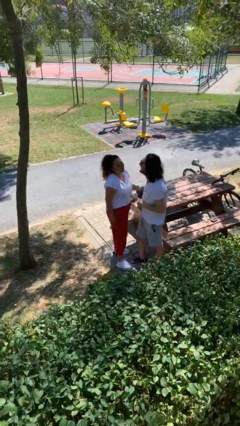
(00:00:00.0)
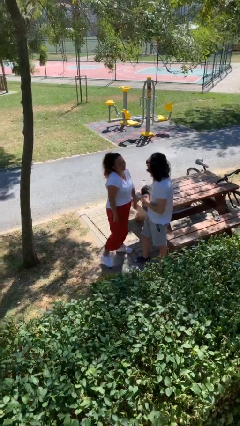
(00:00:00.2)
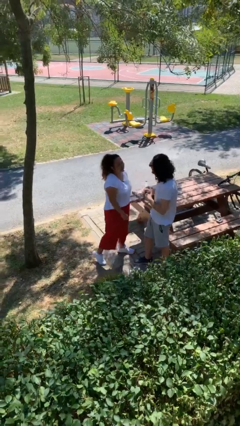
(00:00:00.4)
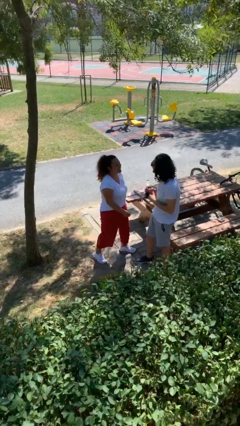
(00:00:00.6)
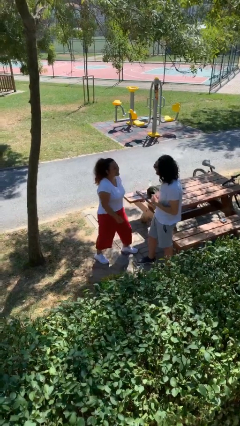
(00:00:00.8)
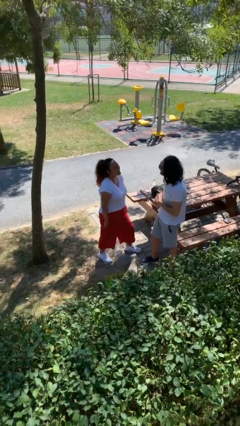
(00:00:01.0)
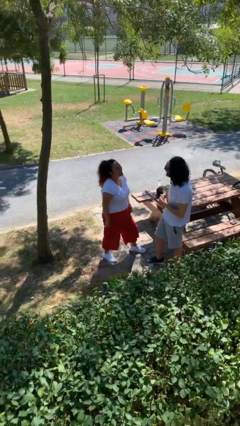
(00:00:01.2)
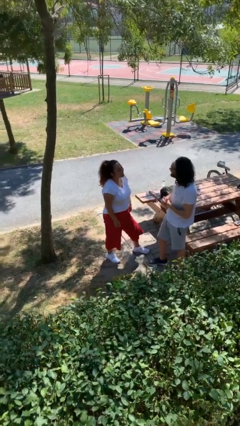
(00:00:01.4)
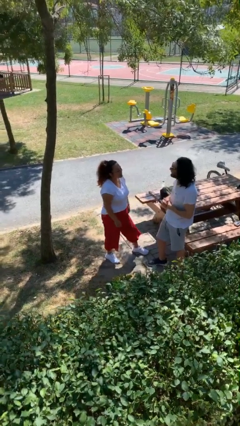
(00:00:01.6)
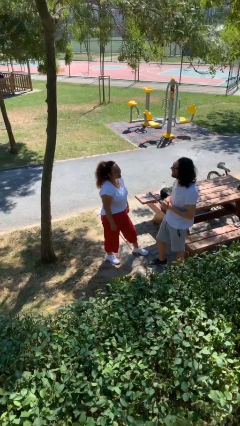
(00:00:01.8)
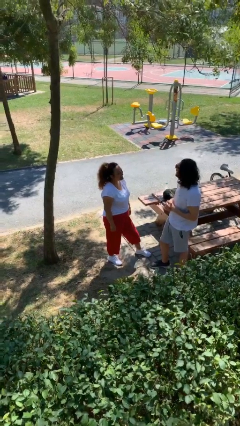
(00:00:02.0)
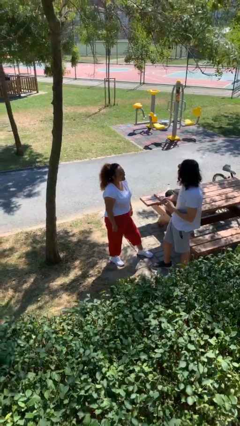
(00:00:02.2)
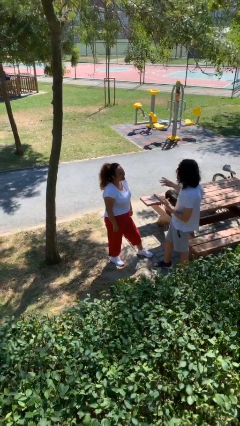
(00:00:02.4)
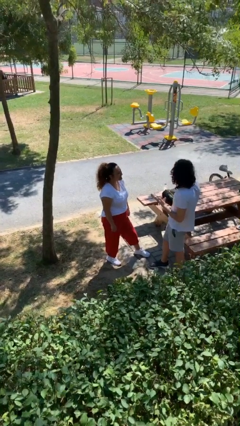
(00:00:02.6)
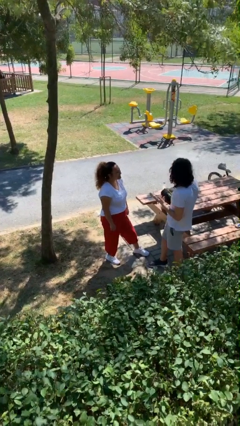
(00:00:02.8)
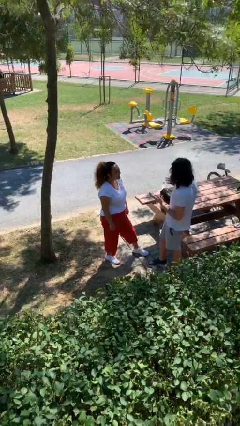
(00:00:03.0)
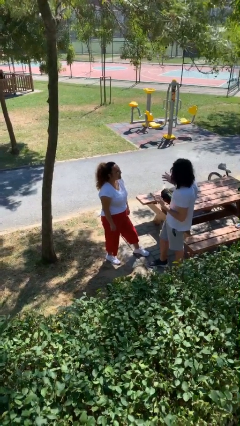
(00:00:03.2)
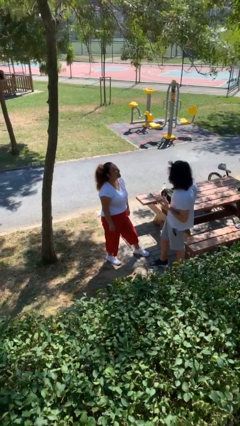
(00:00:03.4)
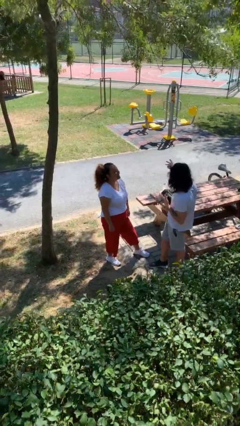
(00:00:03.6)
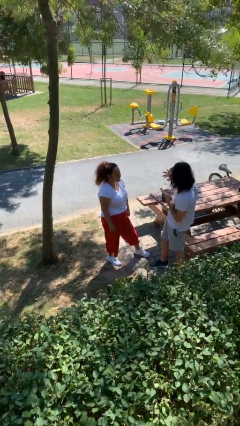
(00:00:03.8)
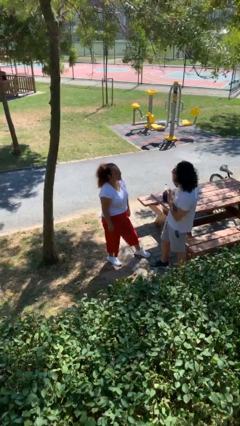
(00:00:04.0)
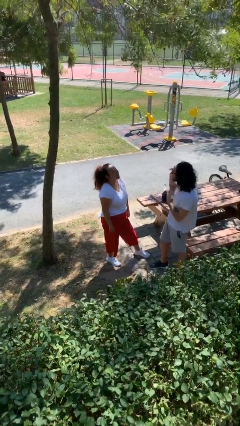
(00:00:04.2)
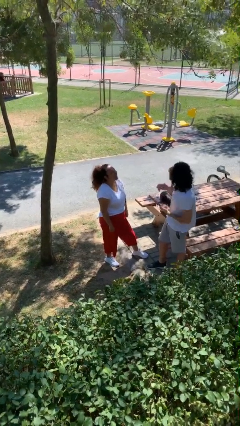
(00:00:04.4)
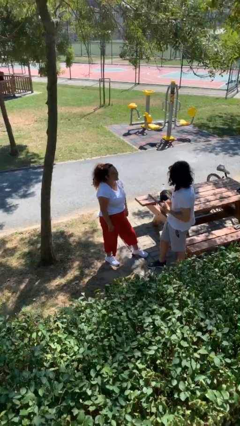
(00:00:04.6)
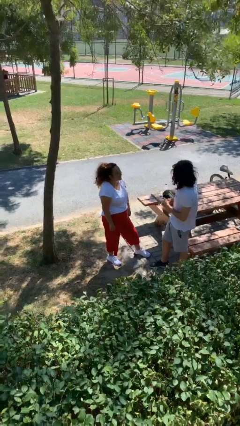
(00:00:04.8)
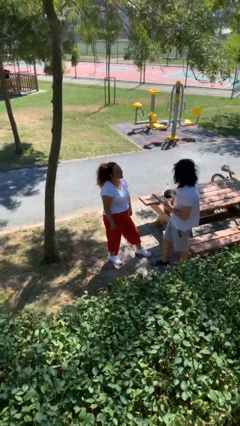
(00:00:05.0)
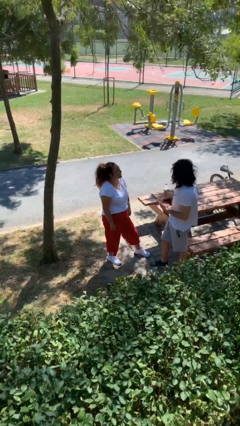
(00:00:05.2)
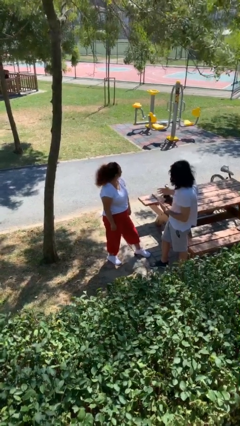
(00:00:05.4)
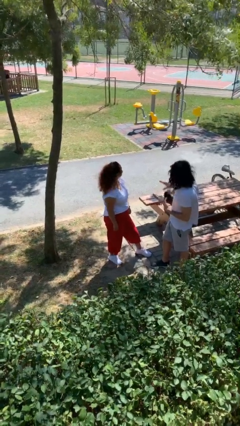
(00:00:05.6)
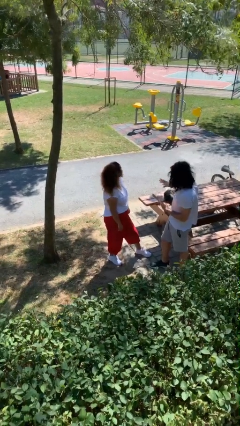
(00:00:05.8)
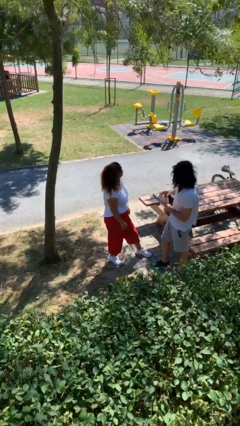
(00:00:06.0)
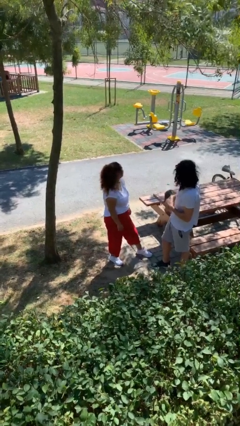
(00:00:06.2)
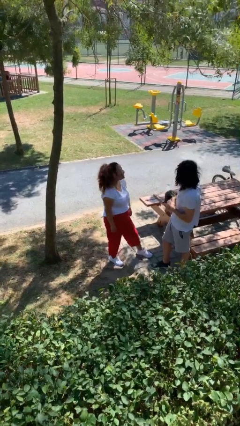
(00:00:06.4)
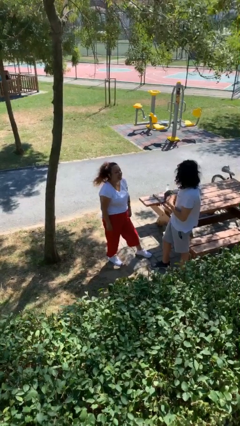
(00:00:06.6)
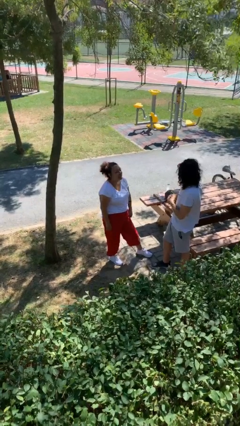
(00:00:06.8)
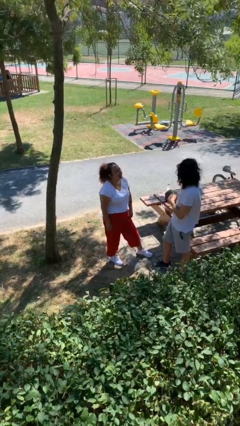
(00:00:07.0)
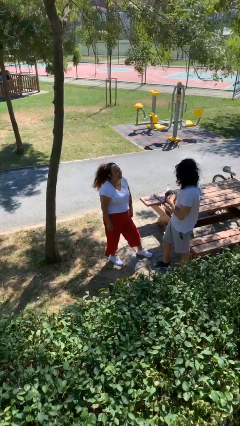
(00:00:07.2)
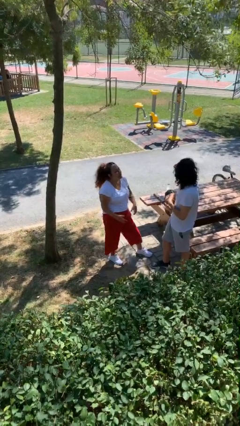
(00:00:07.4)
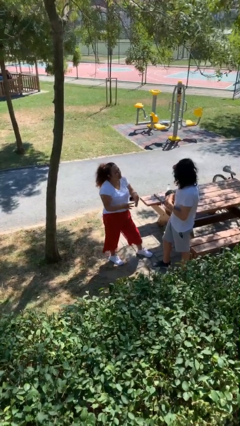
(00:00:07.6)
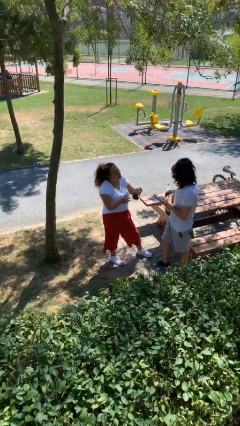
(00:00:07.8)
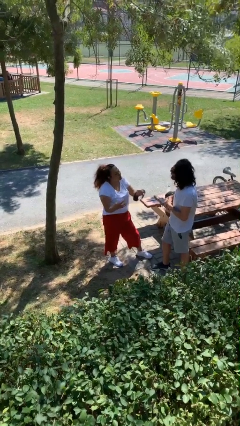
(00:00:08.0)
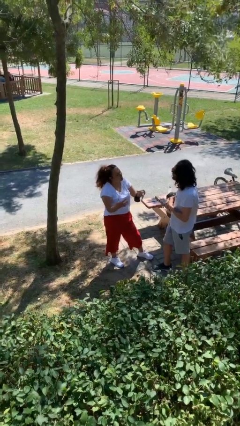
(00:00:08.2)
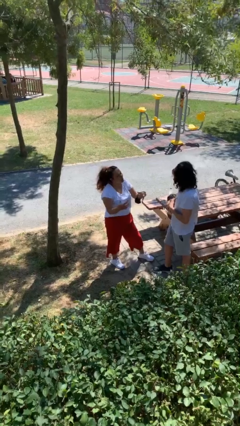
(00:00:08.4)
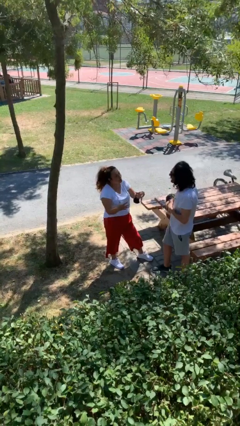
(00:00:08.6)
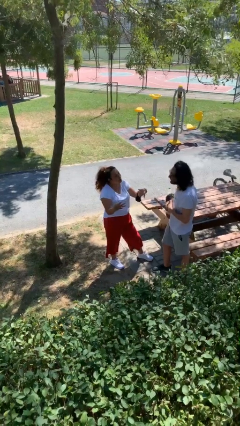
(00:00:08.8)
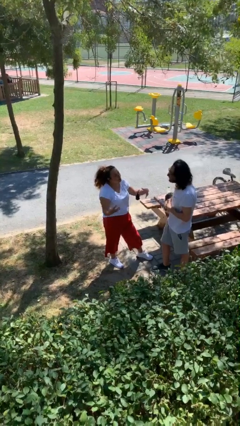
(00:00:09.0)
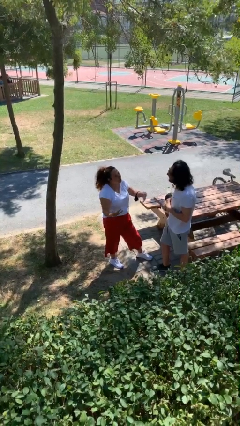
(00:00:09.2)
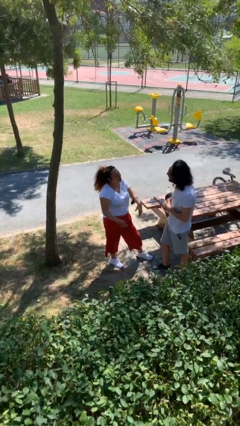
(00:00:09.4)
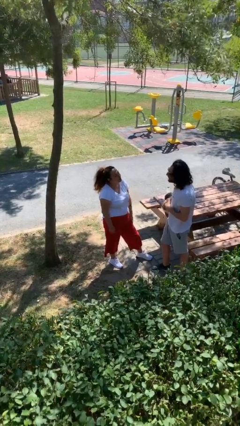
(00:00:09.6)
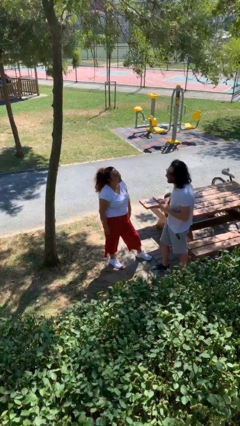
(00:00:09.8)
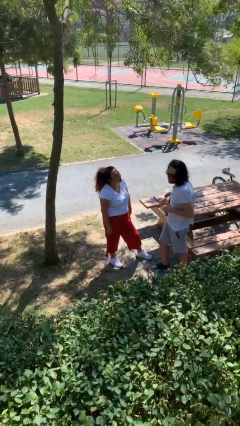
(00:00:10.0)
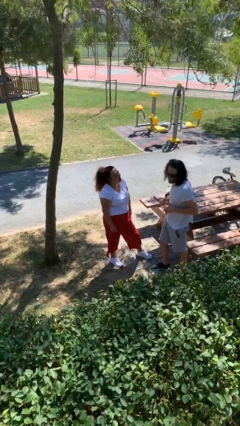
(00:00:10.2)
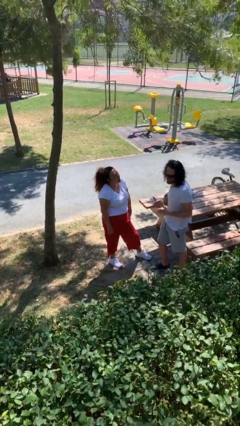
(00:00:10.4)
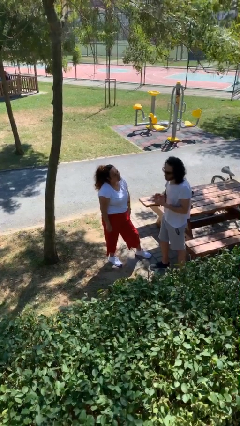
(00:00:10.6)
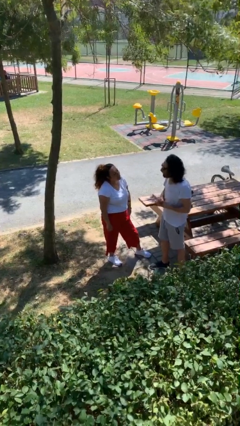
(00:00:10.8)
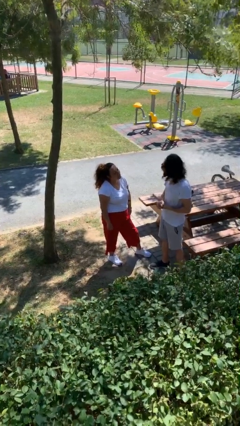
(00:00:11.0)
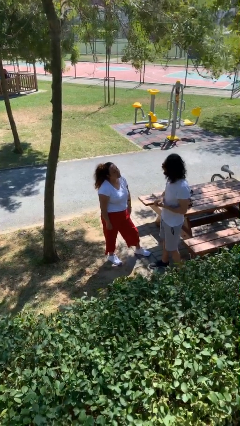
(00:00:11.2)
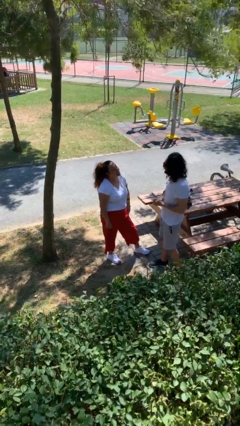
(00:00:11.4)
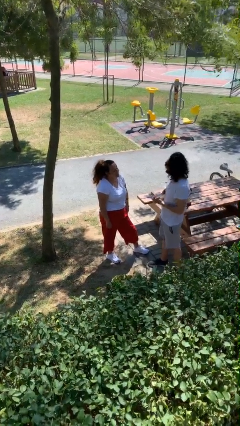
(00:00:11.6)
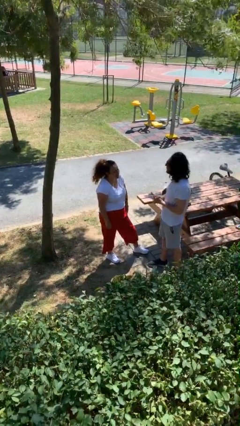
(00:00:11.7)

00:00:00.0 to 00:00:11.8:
person talks to person

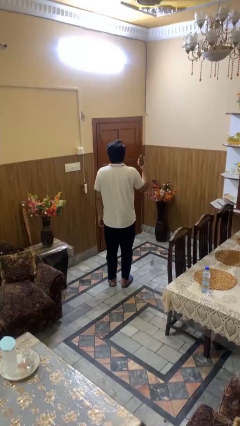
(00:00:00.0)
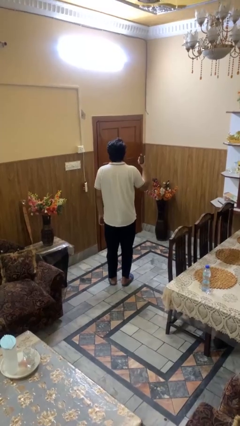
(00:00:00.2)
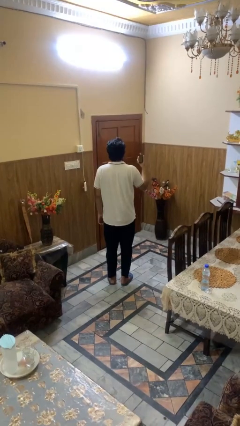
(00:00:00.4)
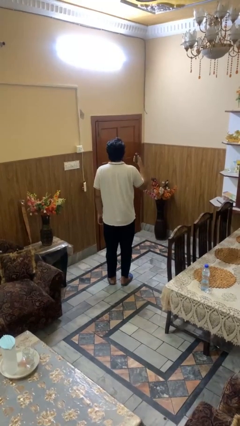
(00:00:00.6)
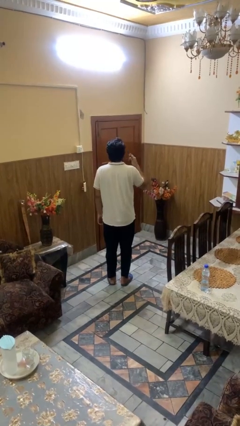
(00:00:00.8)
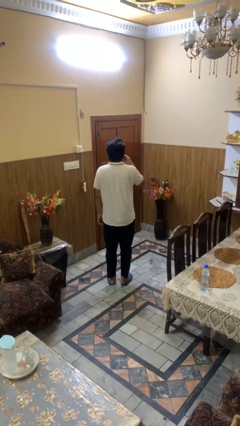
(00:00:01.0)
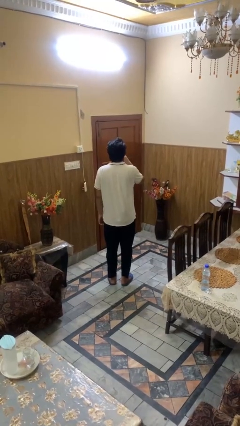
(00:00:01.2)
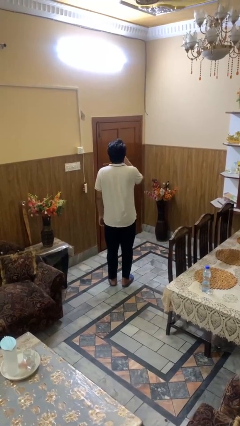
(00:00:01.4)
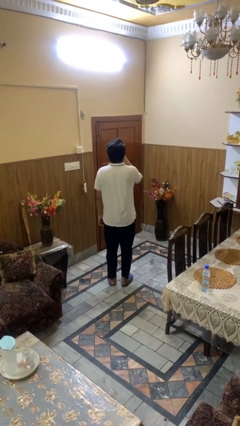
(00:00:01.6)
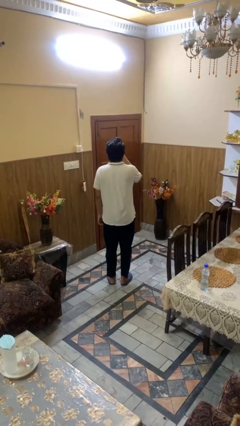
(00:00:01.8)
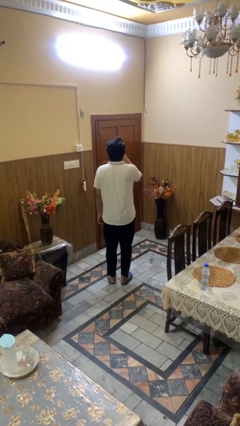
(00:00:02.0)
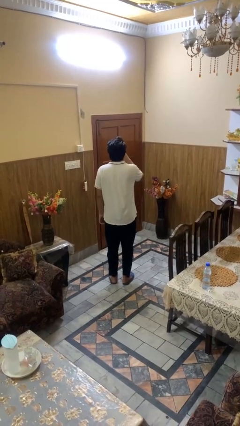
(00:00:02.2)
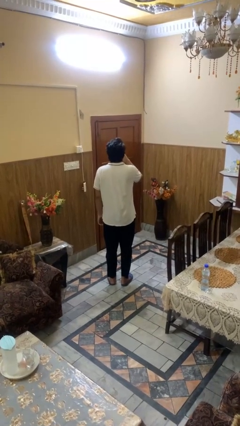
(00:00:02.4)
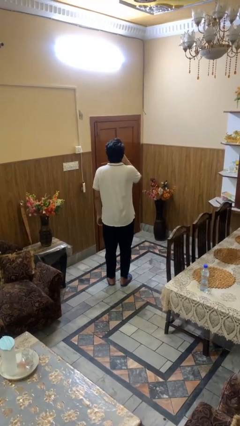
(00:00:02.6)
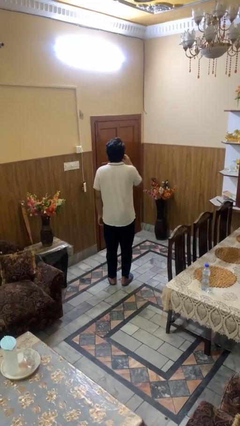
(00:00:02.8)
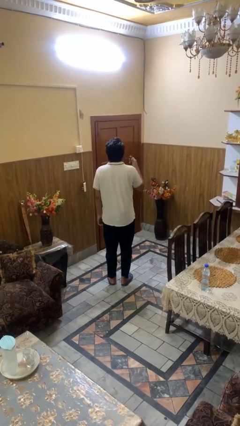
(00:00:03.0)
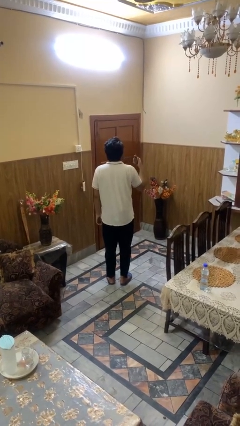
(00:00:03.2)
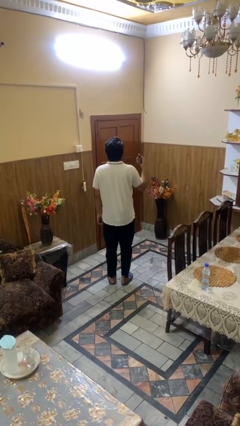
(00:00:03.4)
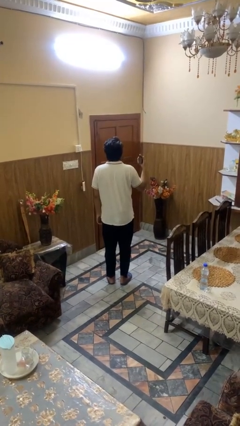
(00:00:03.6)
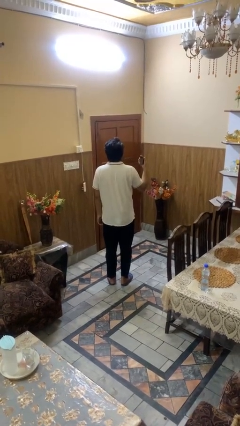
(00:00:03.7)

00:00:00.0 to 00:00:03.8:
person vapes

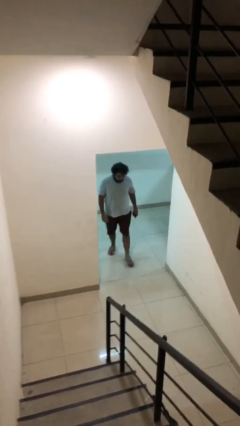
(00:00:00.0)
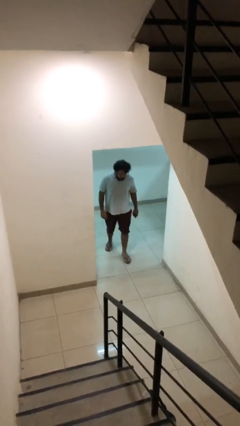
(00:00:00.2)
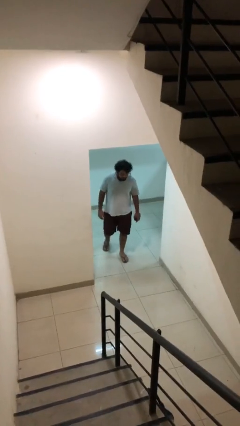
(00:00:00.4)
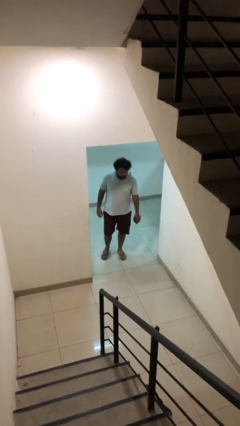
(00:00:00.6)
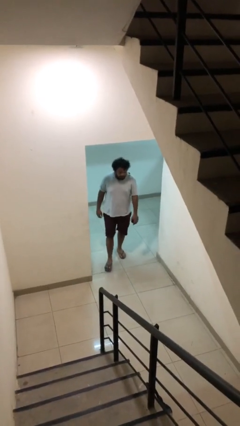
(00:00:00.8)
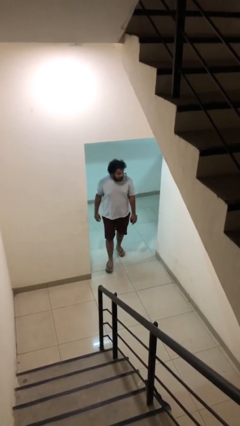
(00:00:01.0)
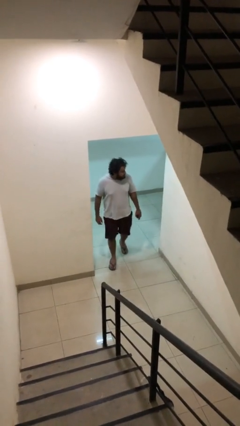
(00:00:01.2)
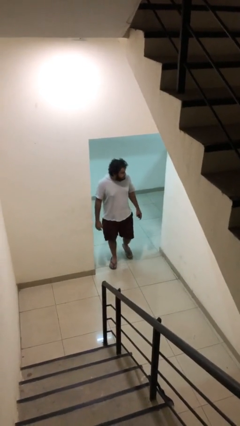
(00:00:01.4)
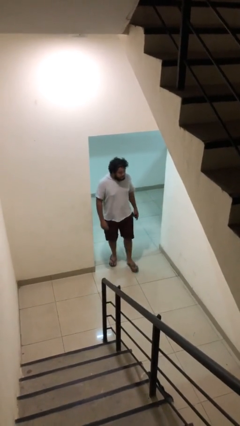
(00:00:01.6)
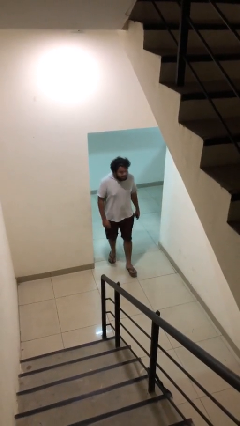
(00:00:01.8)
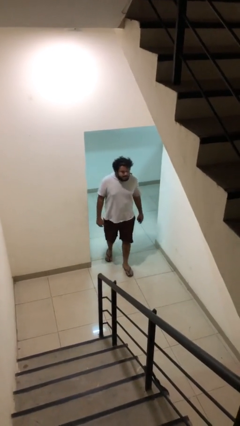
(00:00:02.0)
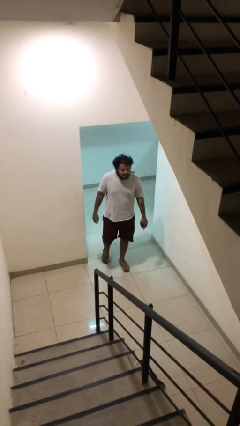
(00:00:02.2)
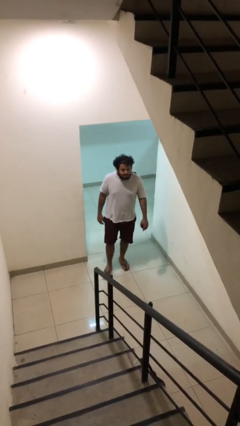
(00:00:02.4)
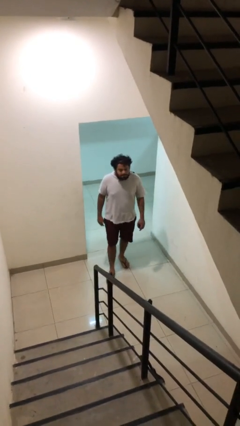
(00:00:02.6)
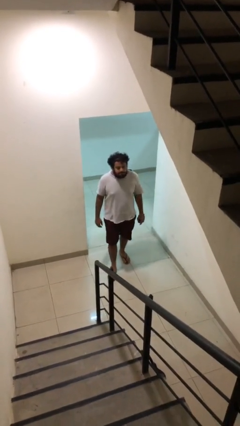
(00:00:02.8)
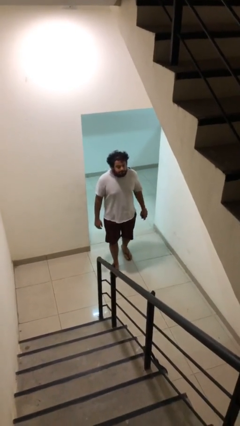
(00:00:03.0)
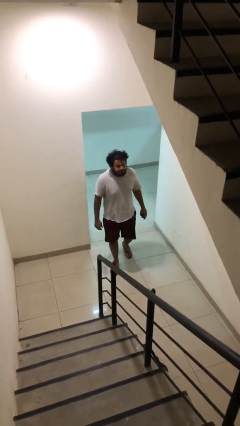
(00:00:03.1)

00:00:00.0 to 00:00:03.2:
person enters scene through structure
